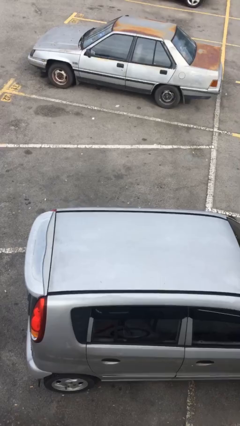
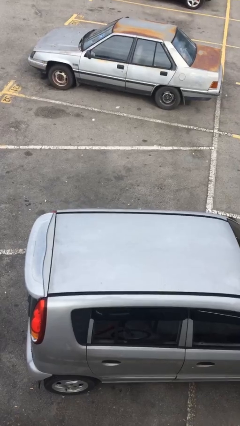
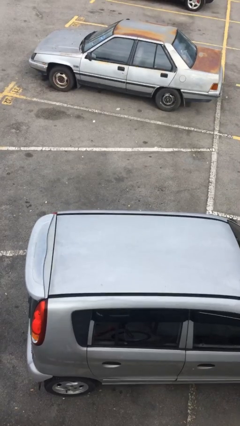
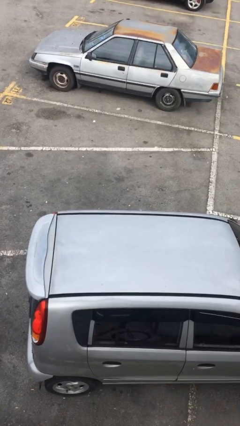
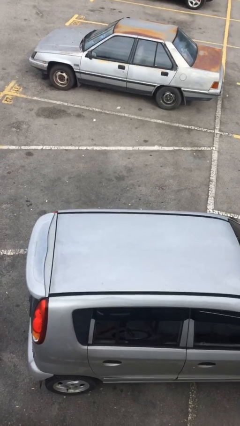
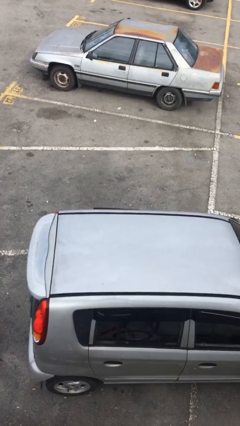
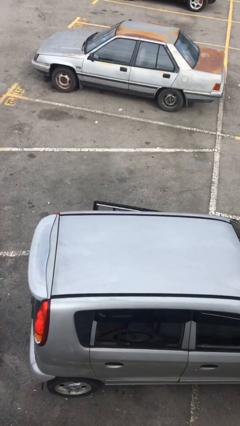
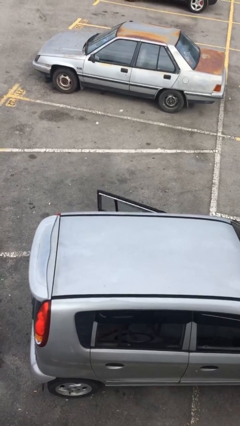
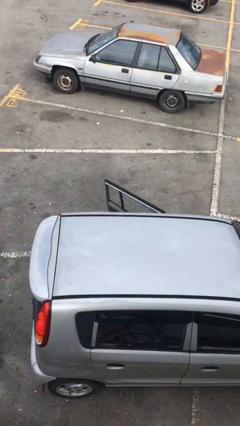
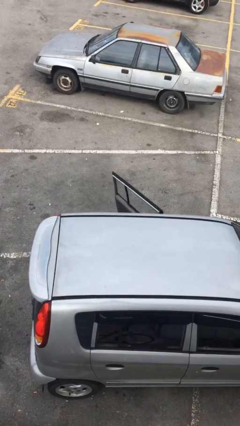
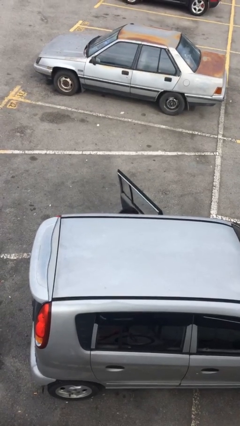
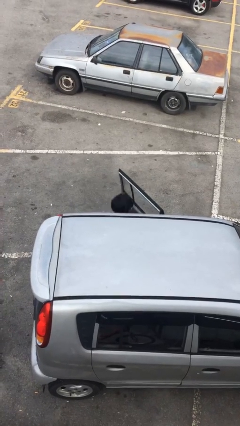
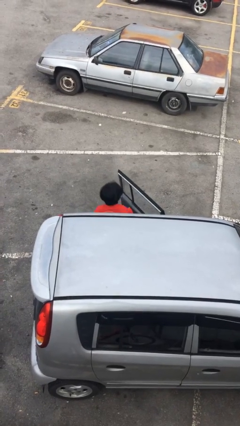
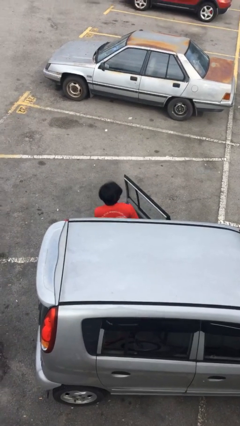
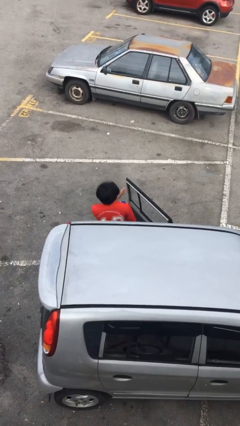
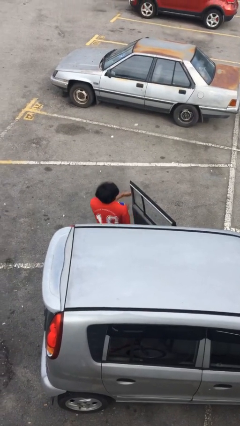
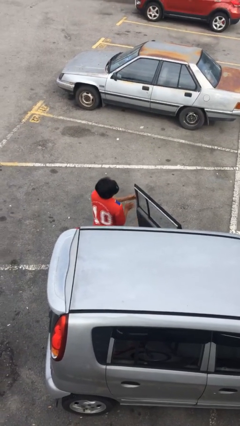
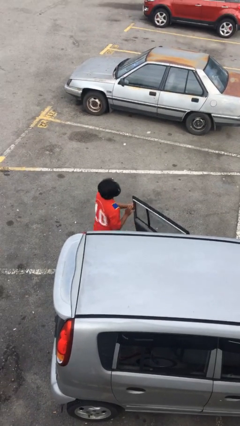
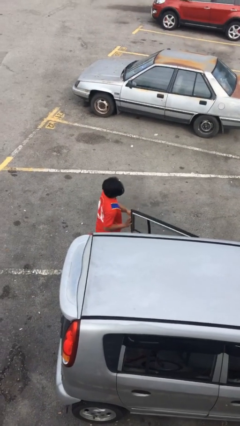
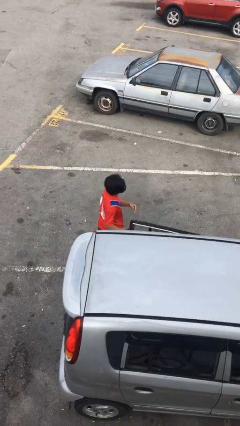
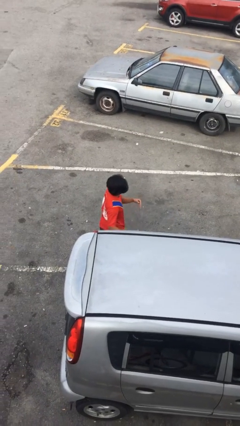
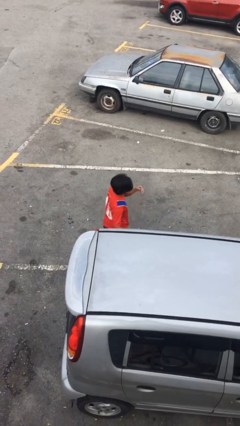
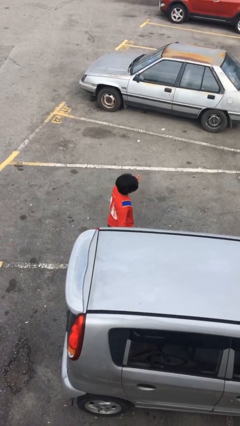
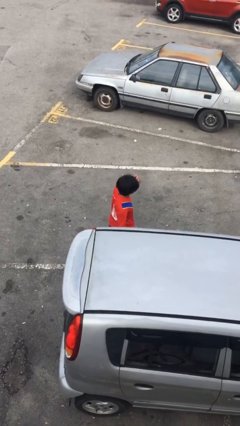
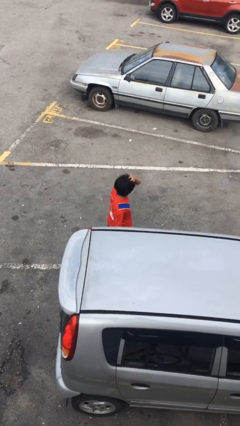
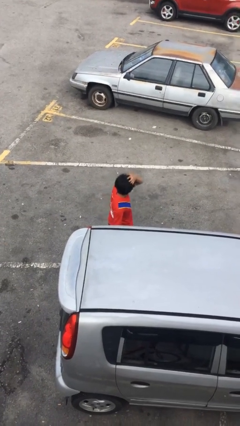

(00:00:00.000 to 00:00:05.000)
person exits car

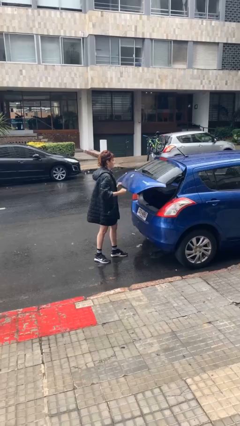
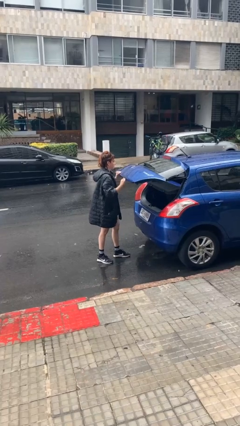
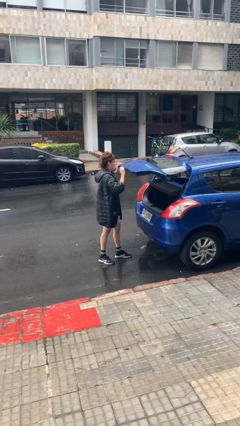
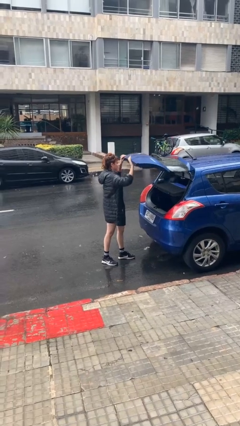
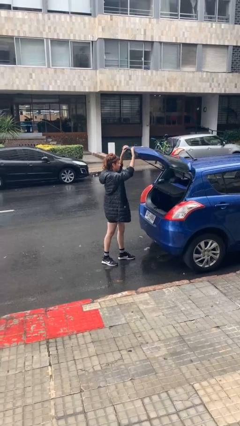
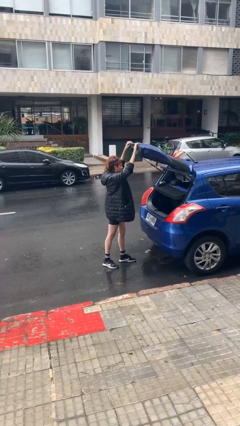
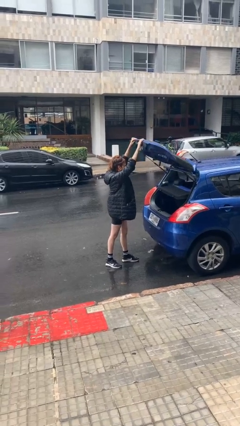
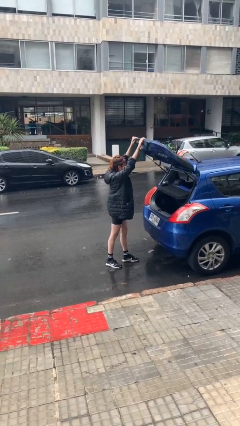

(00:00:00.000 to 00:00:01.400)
person opens car trunk

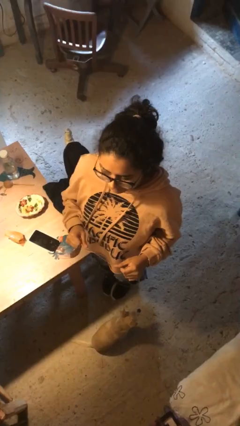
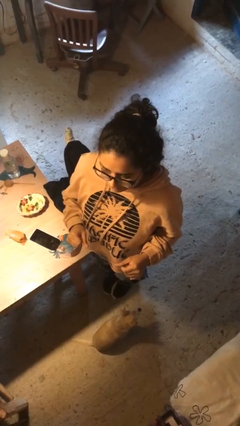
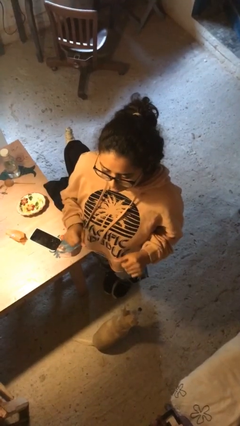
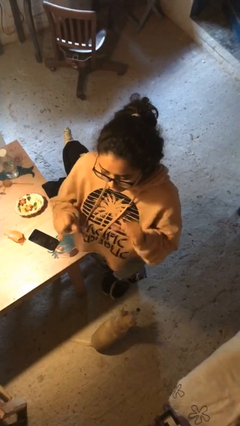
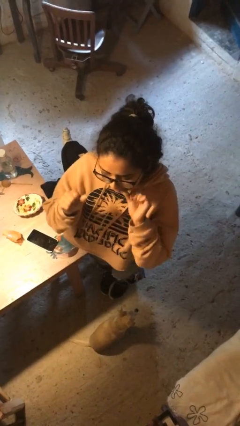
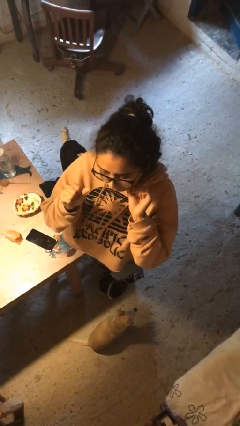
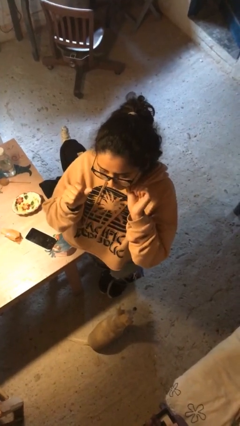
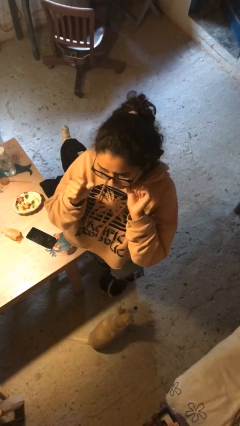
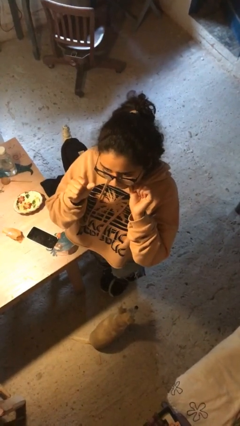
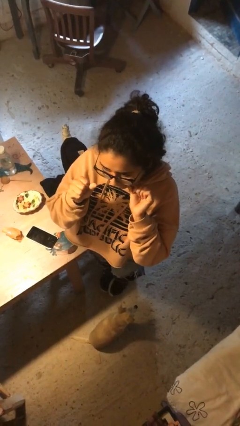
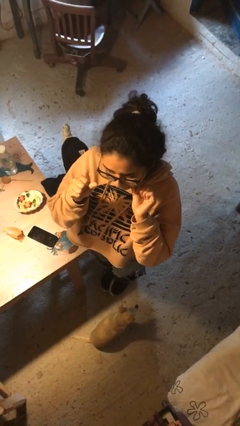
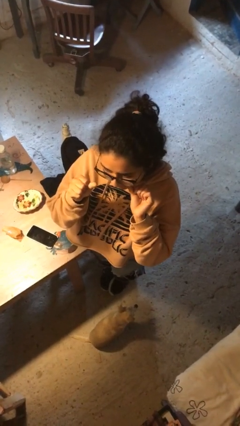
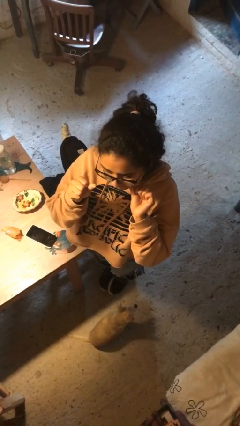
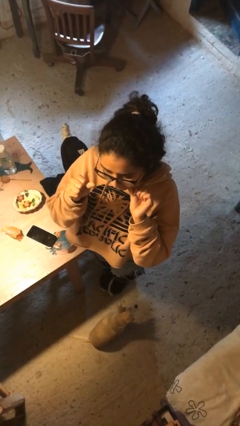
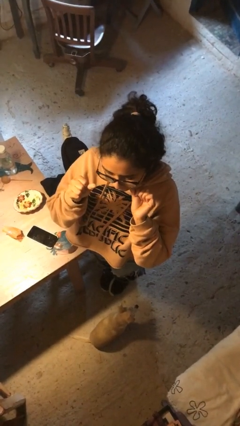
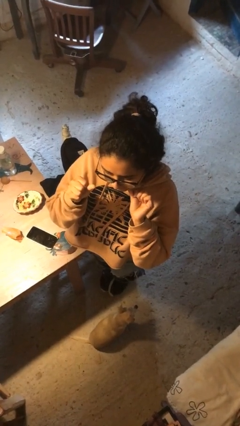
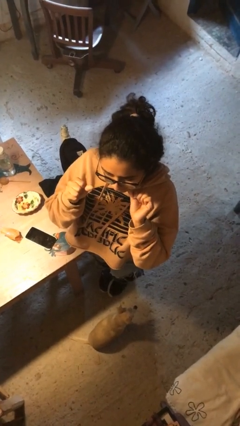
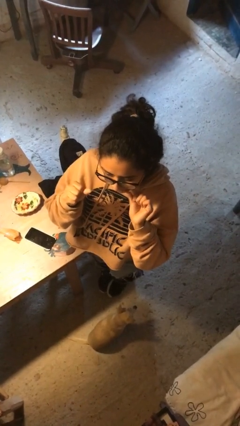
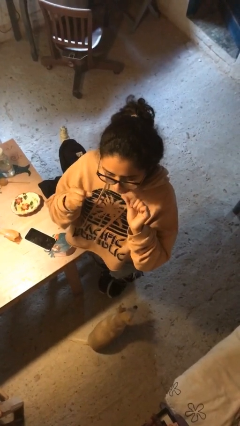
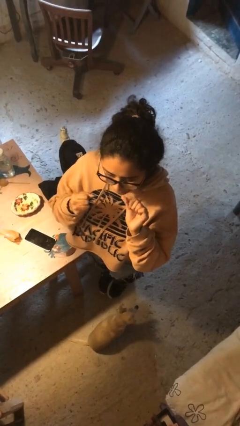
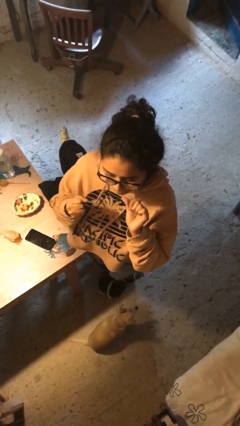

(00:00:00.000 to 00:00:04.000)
person flosses

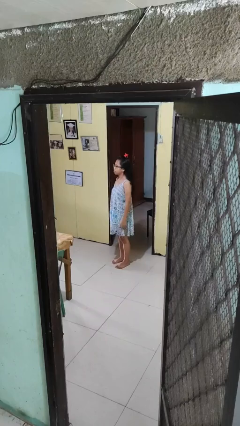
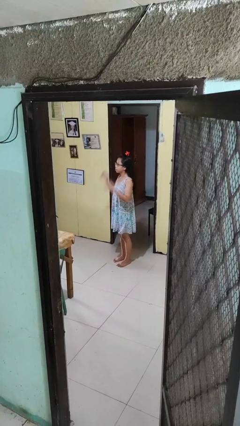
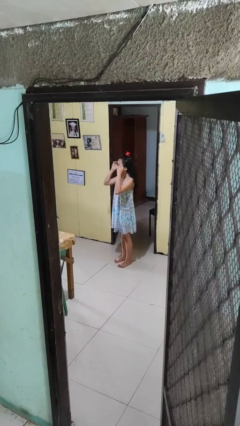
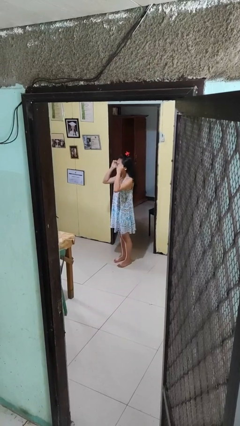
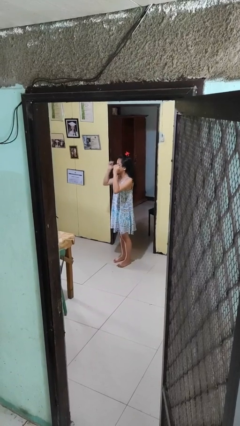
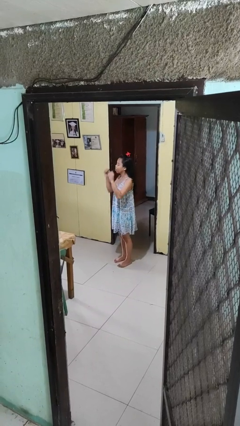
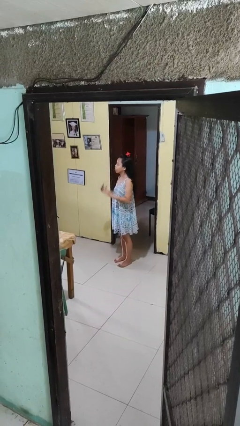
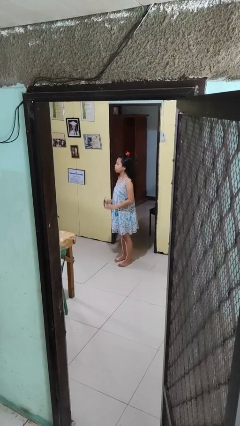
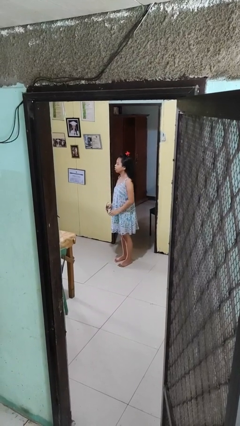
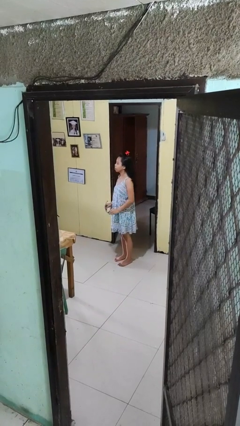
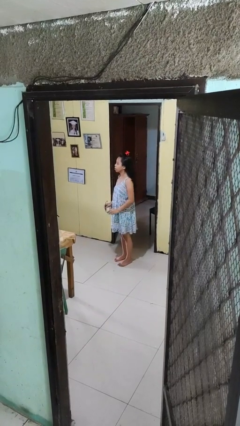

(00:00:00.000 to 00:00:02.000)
person takes off glasses

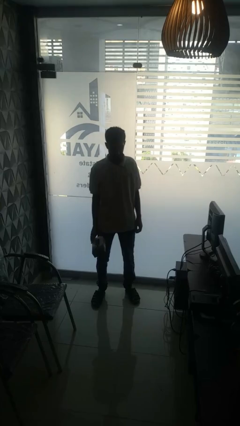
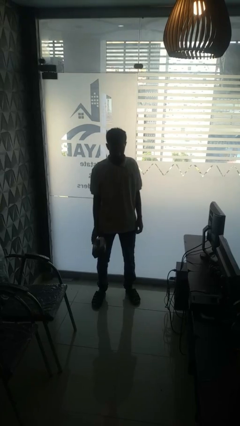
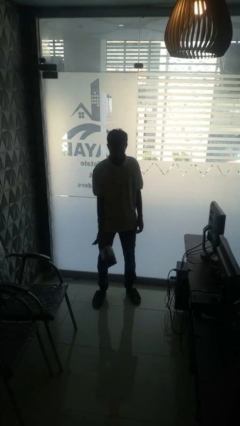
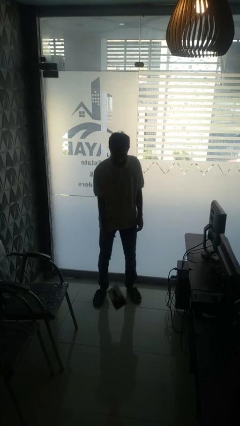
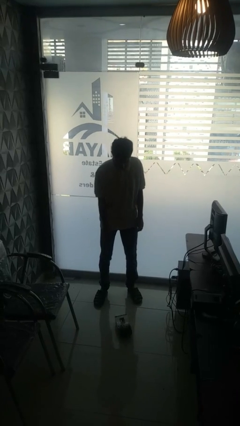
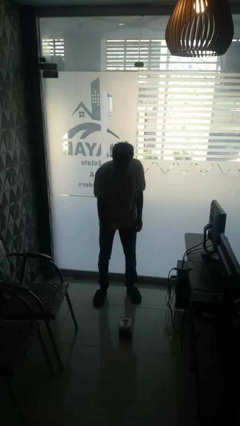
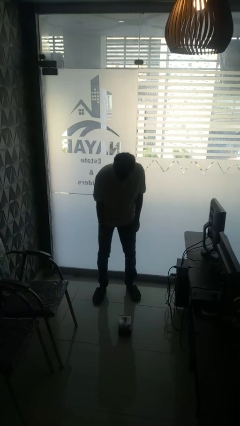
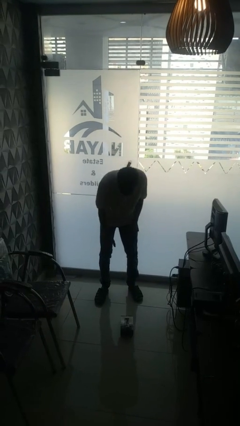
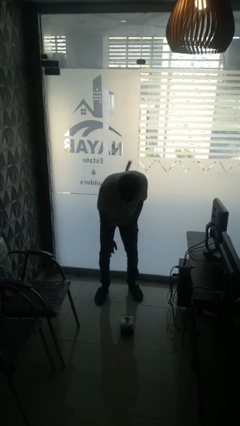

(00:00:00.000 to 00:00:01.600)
person throws object to ground

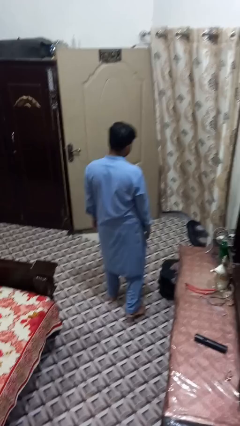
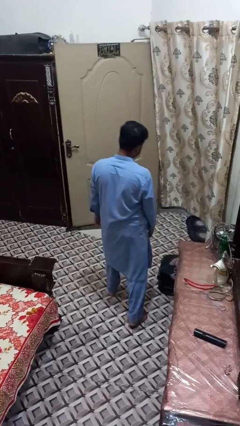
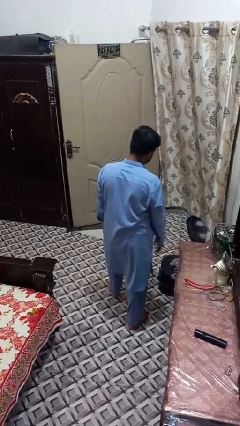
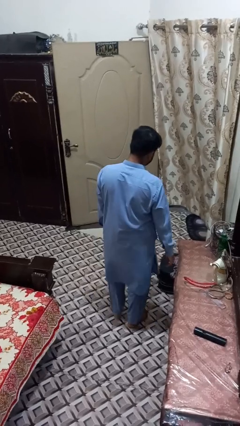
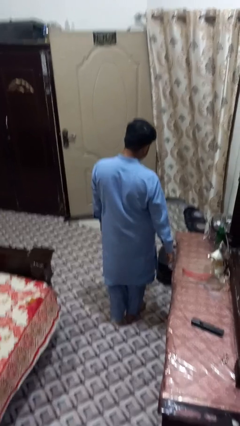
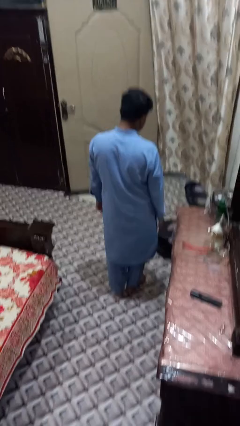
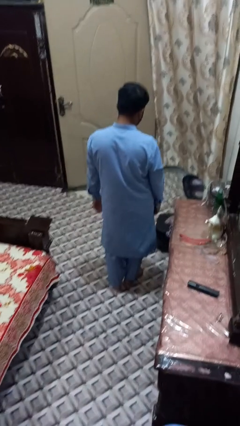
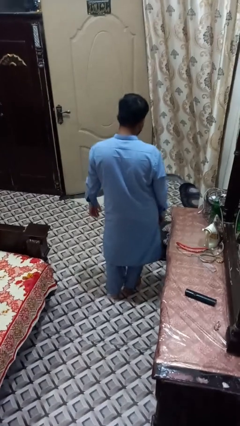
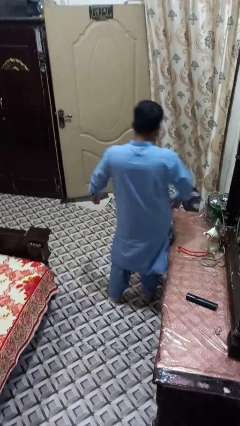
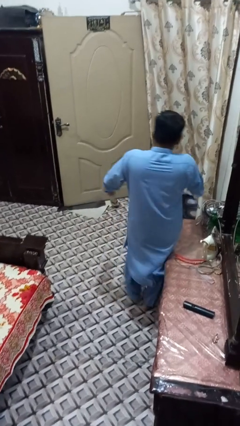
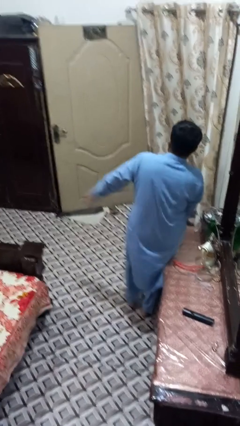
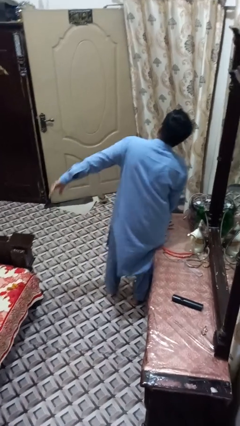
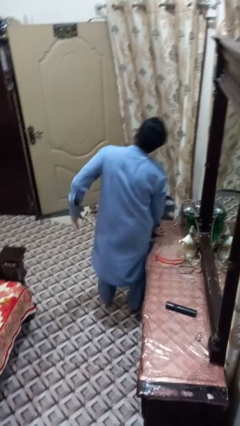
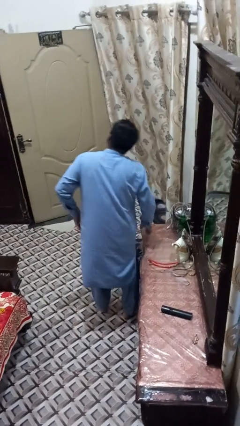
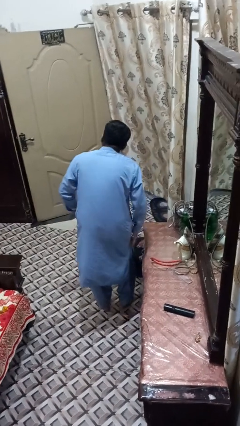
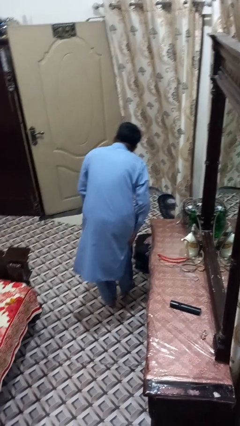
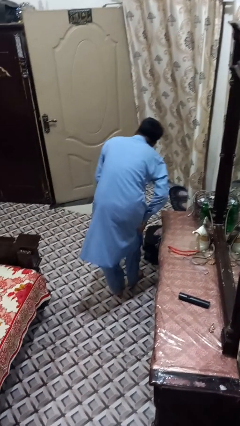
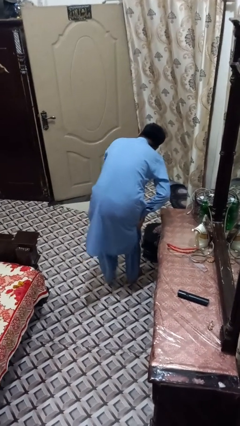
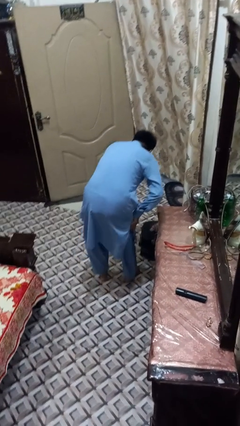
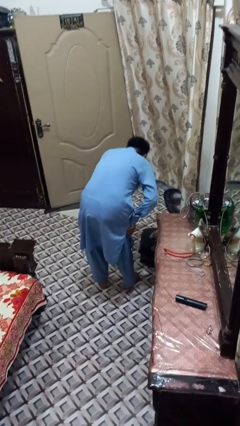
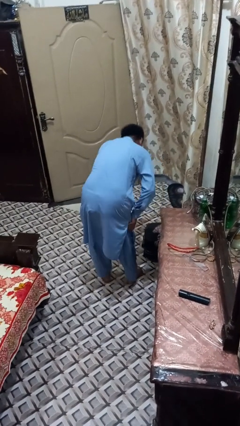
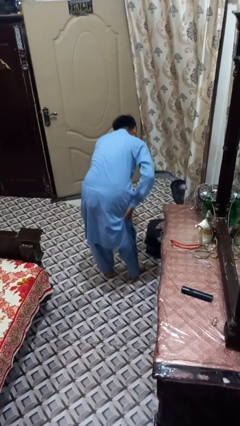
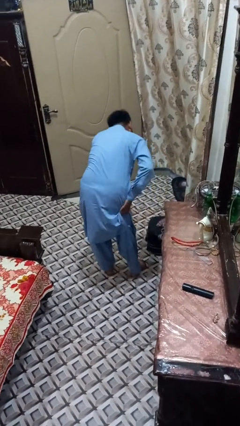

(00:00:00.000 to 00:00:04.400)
person bumps into table
